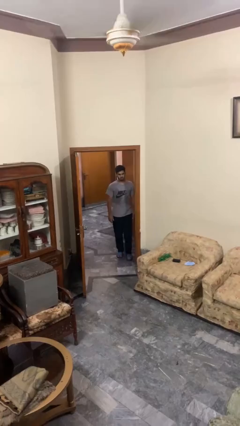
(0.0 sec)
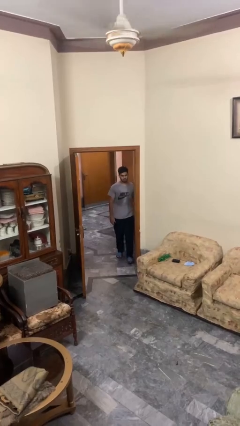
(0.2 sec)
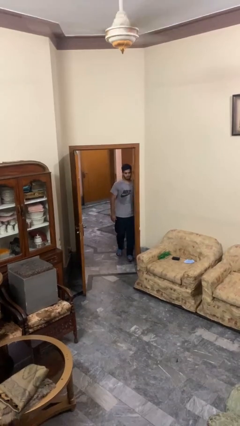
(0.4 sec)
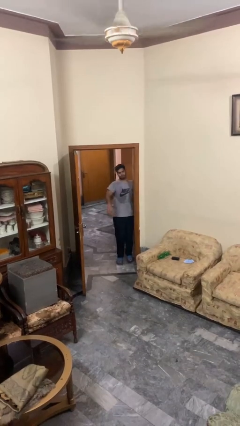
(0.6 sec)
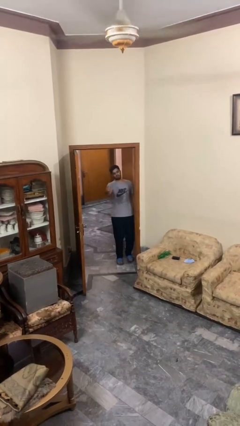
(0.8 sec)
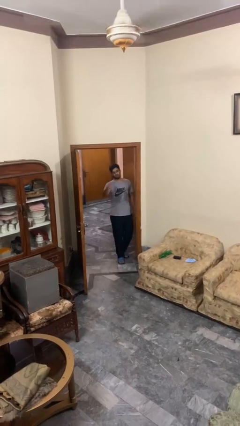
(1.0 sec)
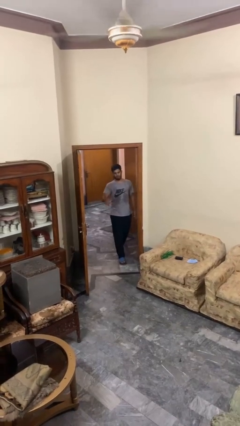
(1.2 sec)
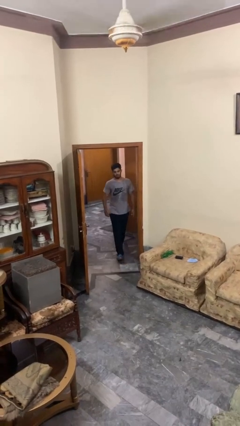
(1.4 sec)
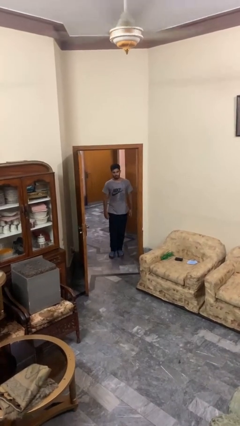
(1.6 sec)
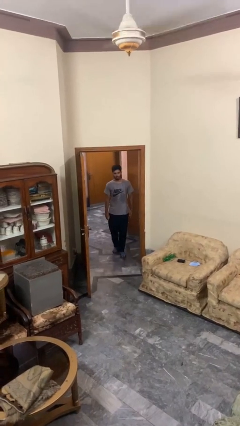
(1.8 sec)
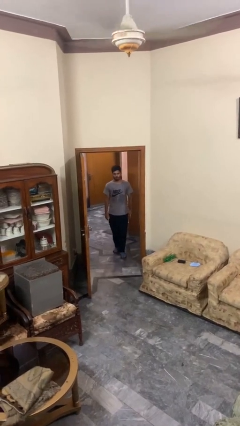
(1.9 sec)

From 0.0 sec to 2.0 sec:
person bumps into wall

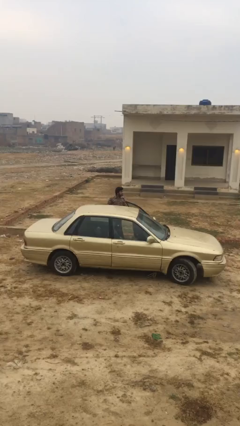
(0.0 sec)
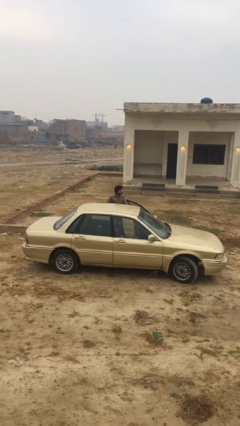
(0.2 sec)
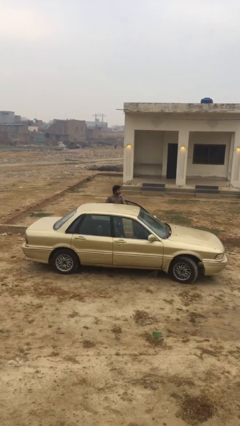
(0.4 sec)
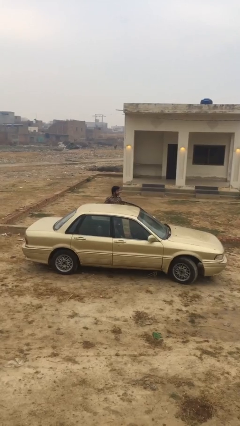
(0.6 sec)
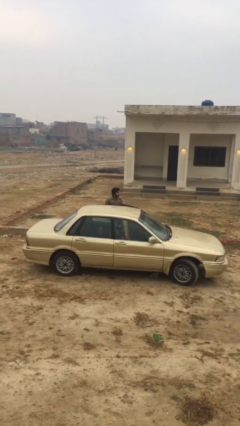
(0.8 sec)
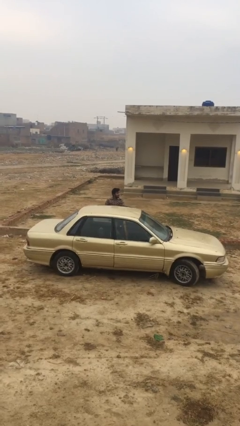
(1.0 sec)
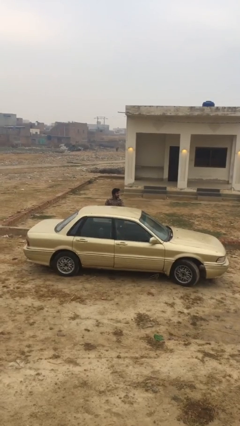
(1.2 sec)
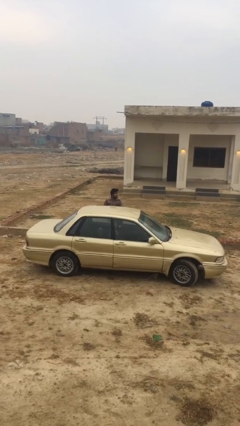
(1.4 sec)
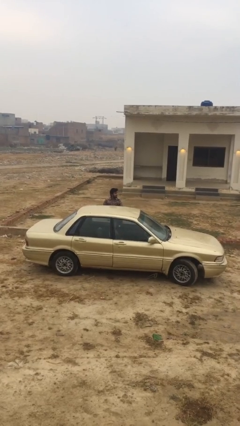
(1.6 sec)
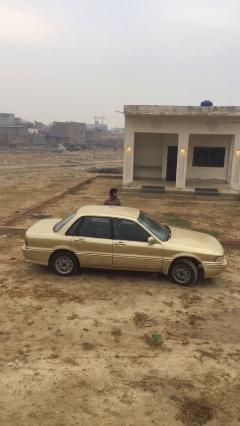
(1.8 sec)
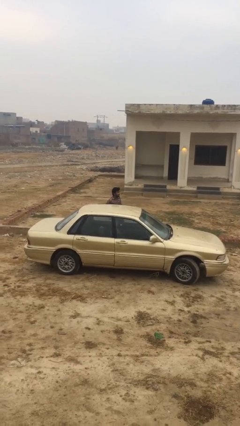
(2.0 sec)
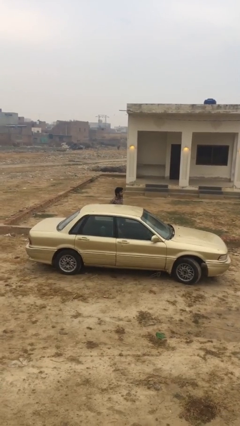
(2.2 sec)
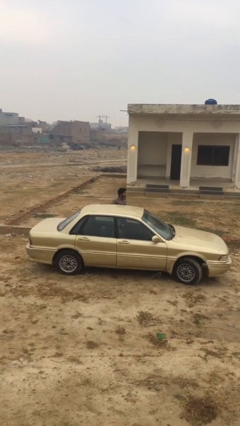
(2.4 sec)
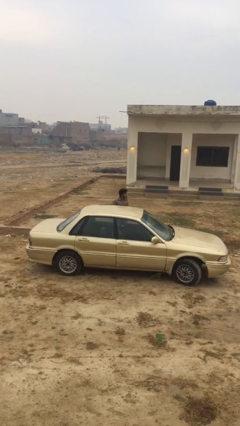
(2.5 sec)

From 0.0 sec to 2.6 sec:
person closes car door

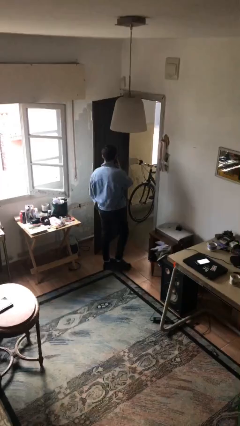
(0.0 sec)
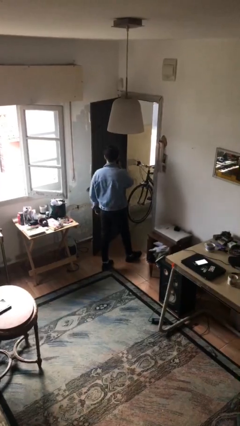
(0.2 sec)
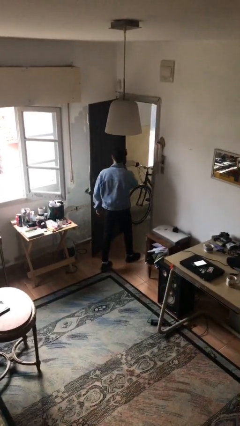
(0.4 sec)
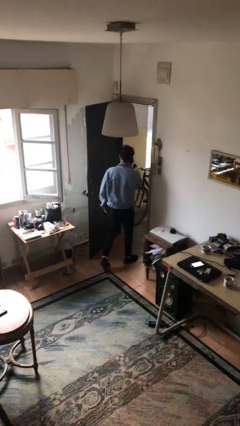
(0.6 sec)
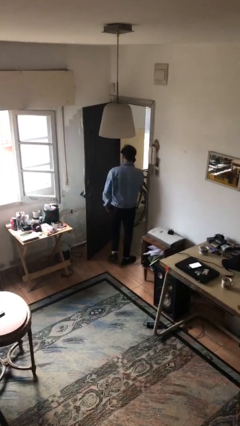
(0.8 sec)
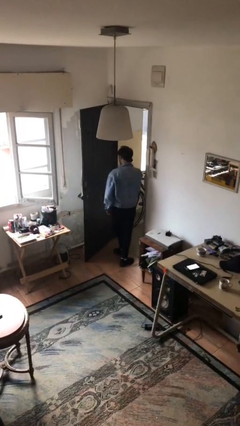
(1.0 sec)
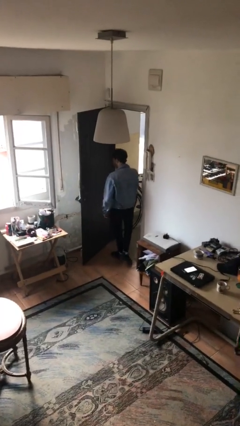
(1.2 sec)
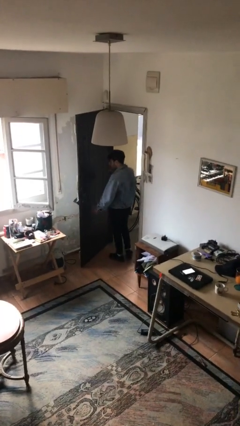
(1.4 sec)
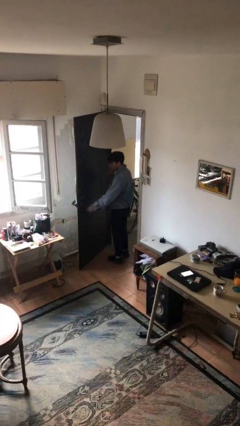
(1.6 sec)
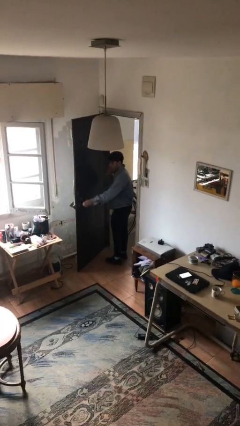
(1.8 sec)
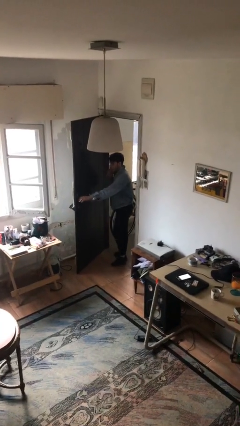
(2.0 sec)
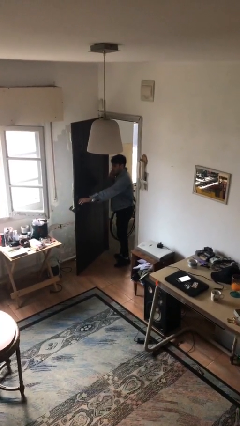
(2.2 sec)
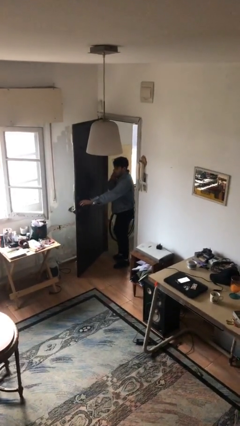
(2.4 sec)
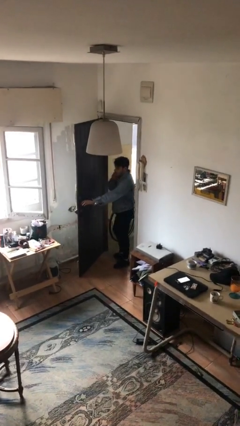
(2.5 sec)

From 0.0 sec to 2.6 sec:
person exits scene through structure

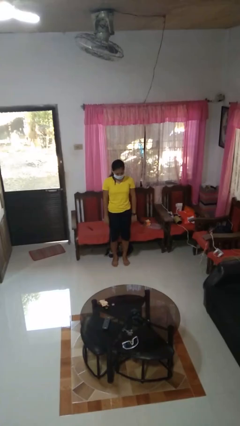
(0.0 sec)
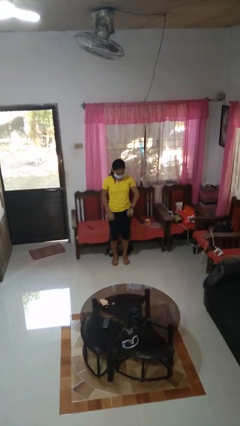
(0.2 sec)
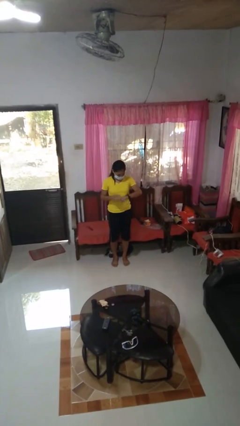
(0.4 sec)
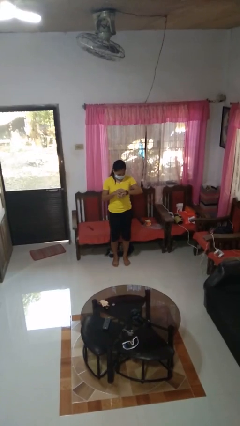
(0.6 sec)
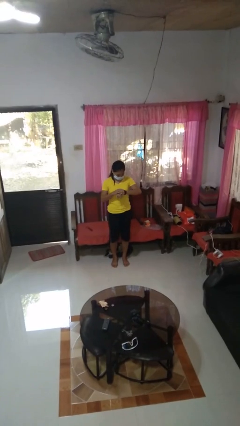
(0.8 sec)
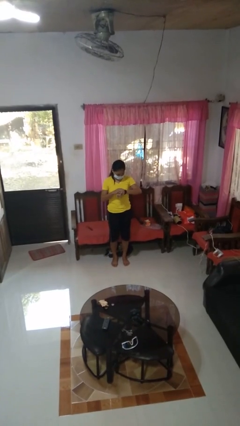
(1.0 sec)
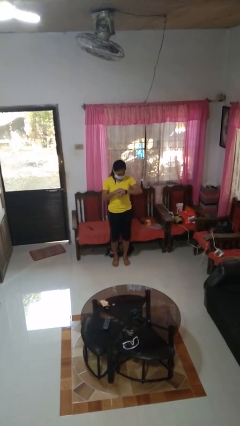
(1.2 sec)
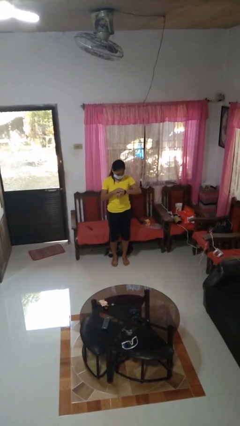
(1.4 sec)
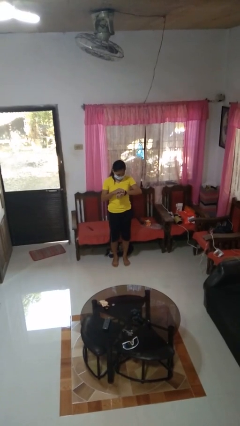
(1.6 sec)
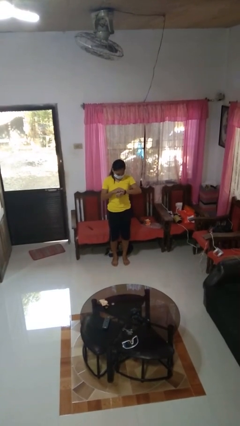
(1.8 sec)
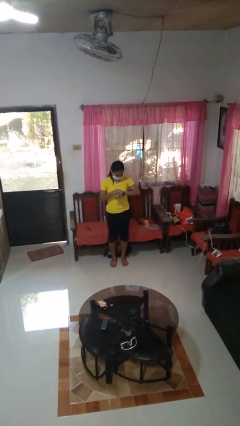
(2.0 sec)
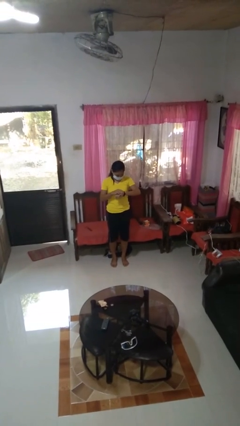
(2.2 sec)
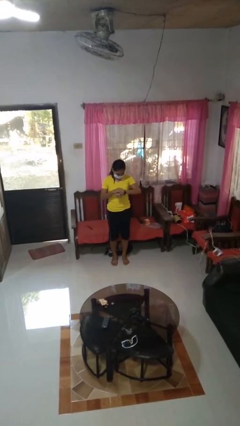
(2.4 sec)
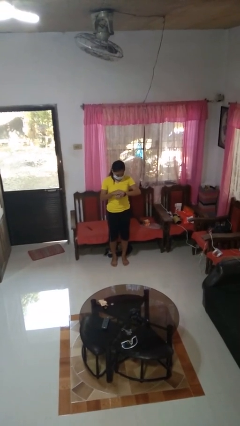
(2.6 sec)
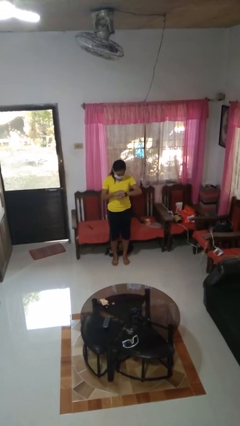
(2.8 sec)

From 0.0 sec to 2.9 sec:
person looks at wristwatch

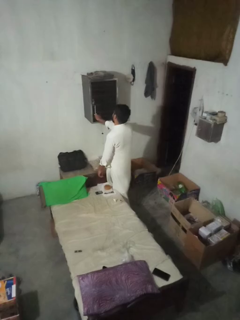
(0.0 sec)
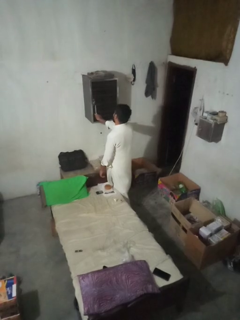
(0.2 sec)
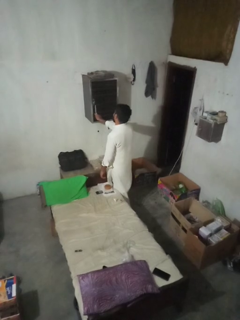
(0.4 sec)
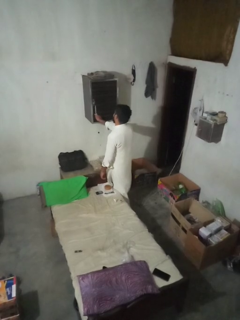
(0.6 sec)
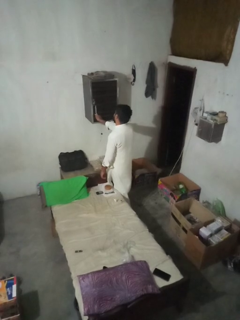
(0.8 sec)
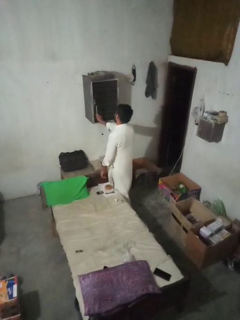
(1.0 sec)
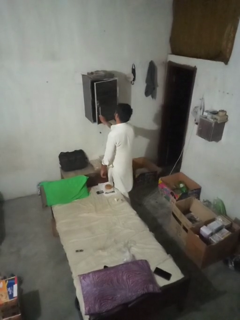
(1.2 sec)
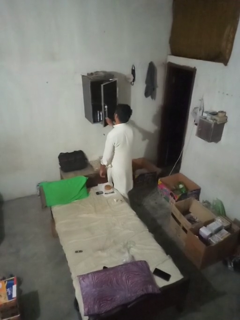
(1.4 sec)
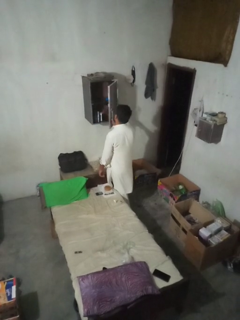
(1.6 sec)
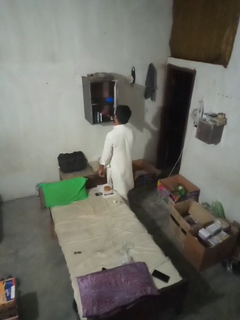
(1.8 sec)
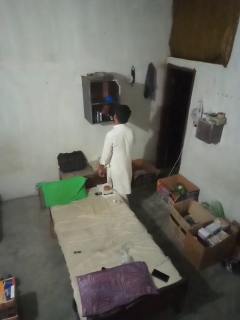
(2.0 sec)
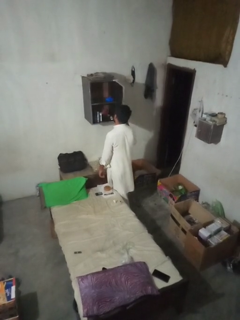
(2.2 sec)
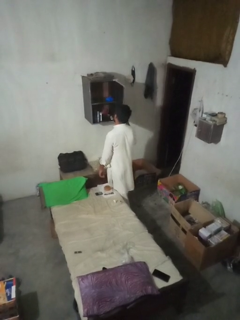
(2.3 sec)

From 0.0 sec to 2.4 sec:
person opens dresser drawer

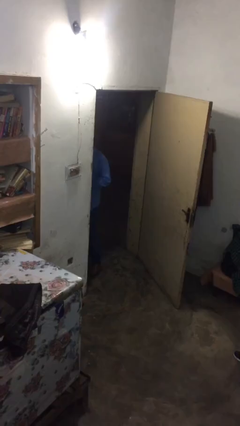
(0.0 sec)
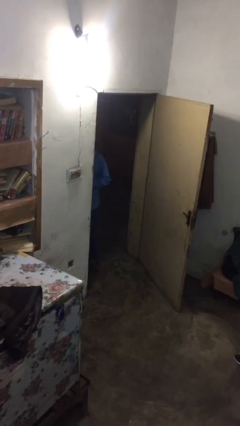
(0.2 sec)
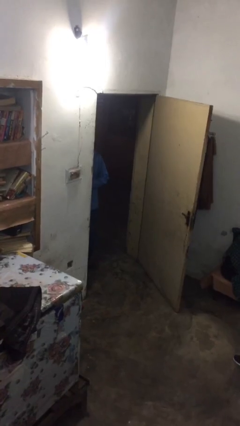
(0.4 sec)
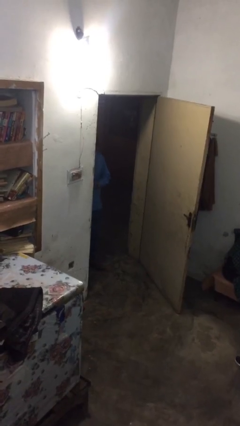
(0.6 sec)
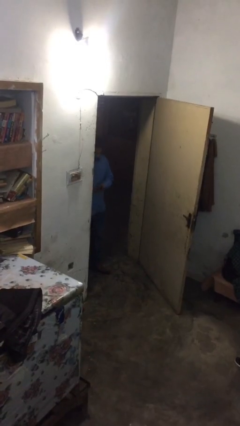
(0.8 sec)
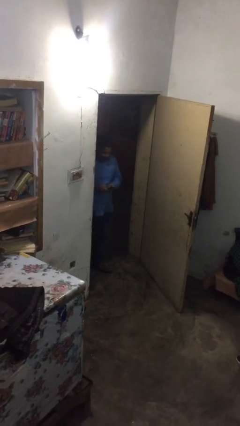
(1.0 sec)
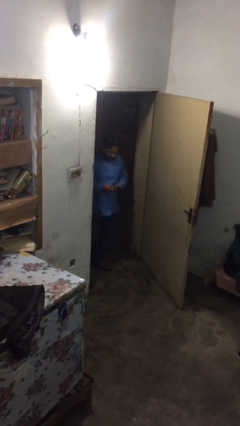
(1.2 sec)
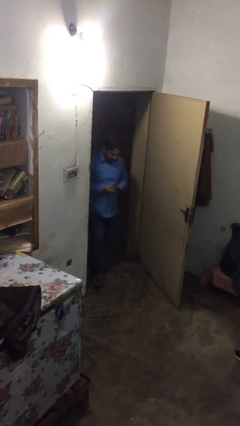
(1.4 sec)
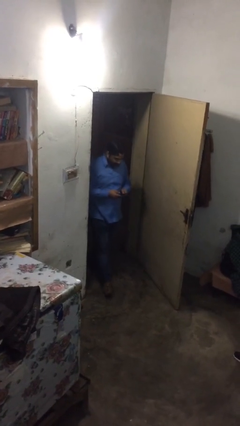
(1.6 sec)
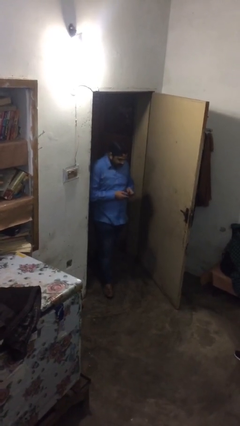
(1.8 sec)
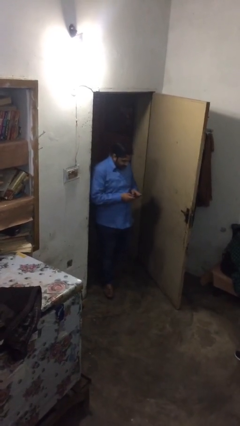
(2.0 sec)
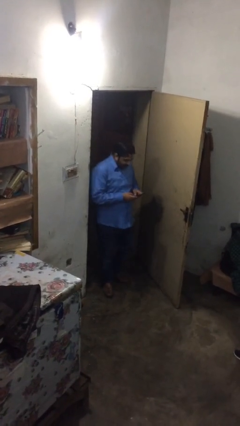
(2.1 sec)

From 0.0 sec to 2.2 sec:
person enters scene through structure

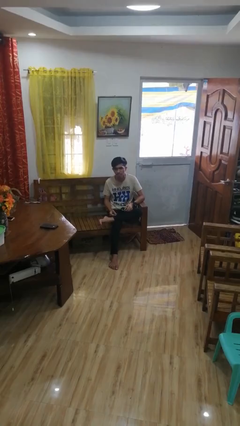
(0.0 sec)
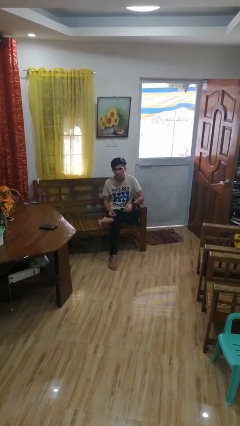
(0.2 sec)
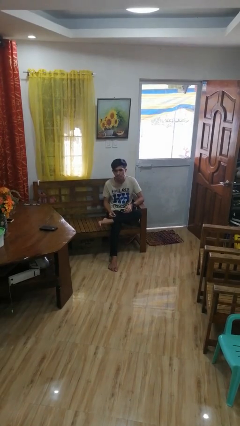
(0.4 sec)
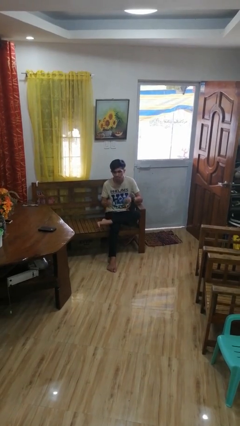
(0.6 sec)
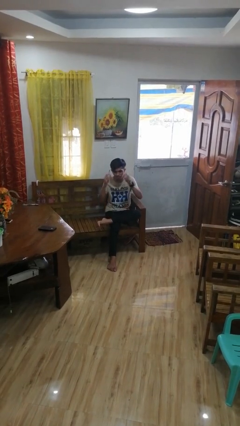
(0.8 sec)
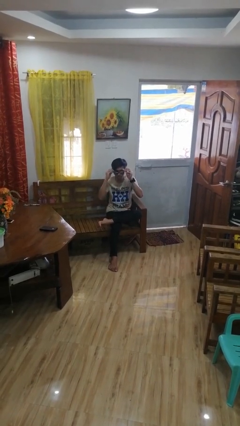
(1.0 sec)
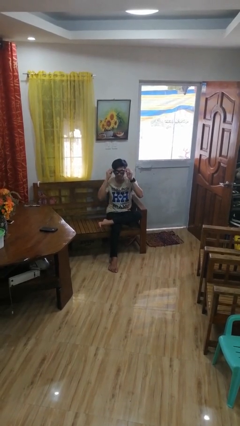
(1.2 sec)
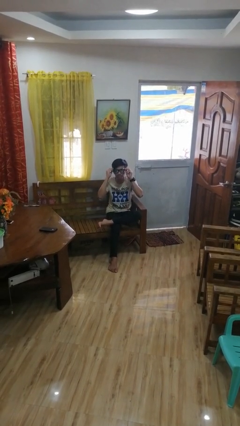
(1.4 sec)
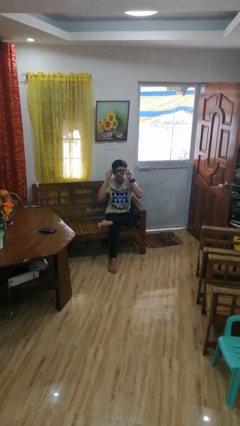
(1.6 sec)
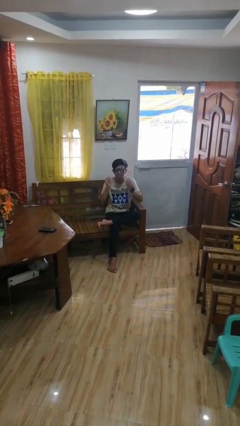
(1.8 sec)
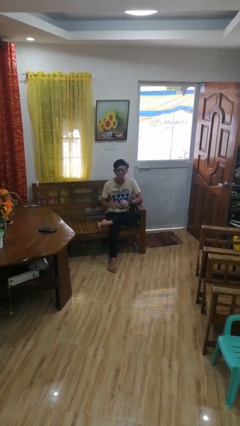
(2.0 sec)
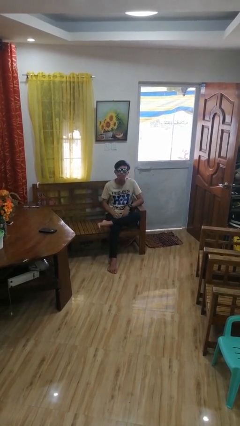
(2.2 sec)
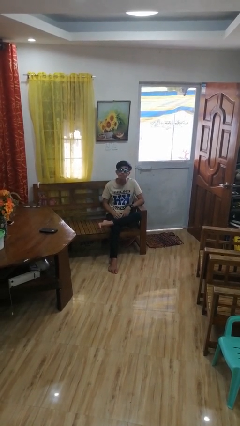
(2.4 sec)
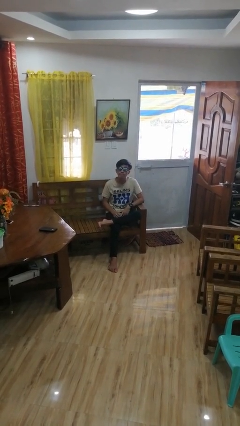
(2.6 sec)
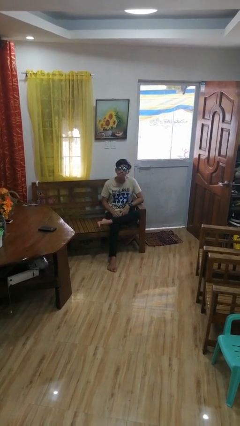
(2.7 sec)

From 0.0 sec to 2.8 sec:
person puts on sunglasses
